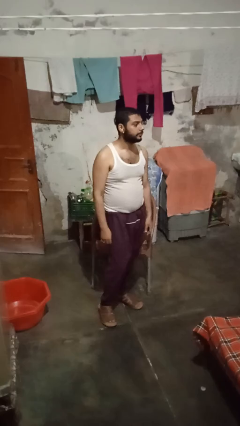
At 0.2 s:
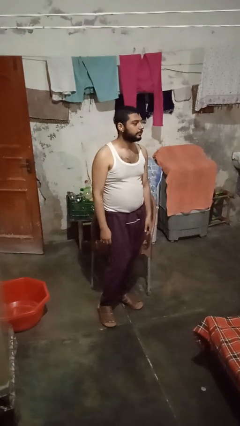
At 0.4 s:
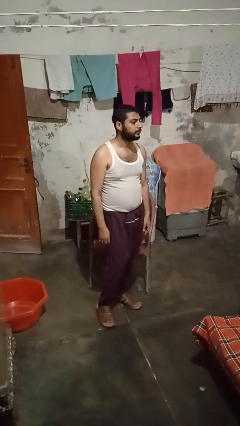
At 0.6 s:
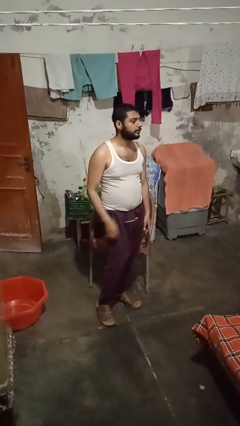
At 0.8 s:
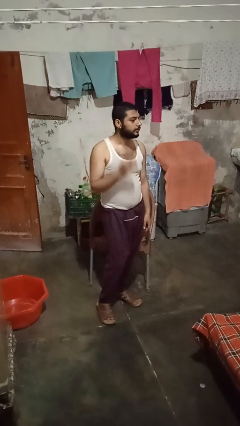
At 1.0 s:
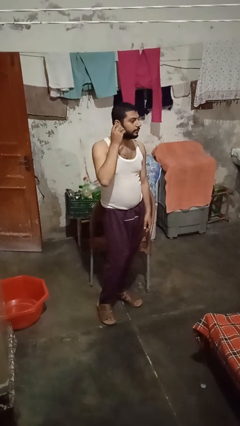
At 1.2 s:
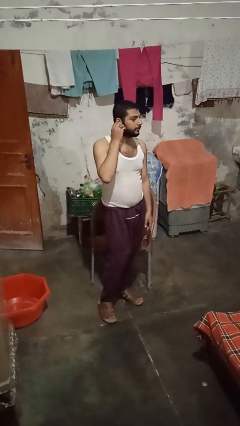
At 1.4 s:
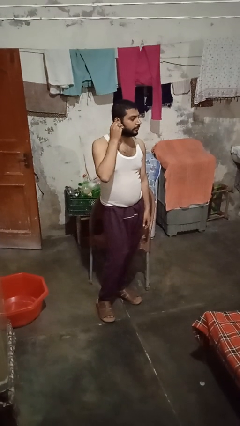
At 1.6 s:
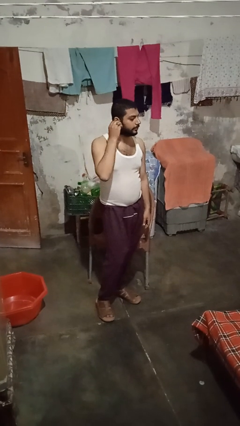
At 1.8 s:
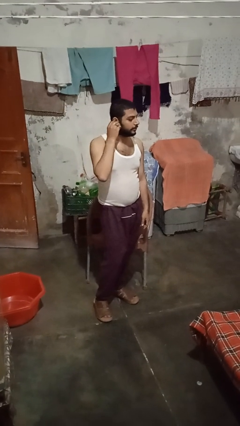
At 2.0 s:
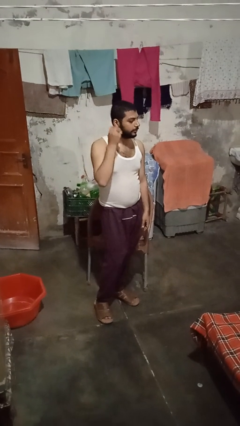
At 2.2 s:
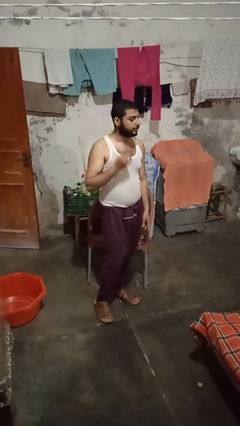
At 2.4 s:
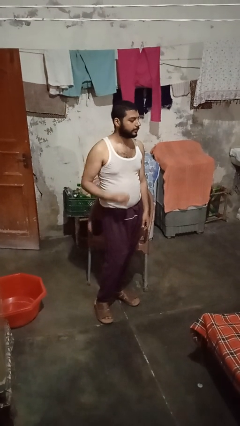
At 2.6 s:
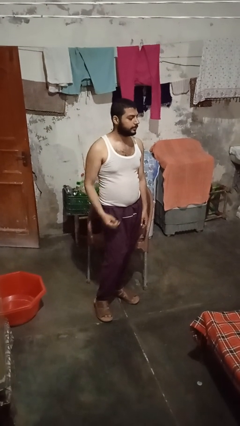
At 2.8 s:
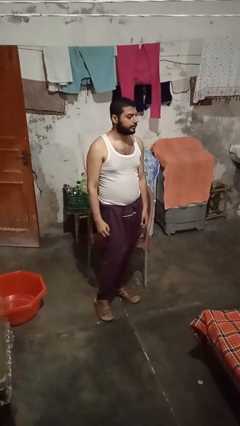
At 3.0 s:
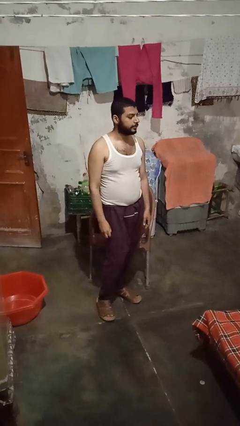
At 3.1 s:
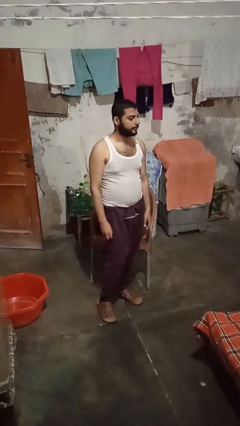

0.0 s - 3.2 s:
person takes off earrings

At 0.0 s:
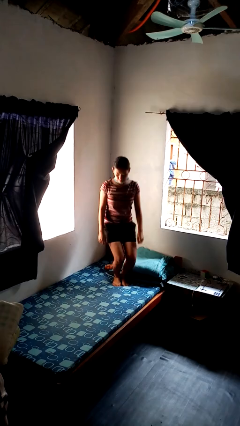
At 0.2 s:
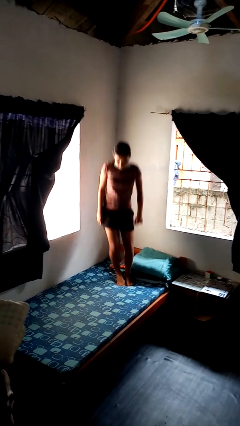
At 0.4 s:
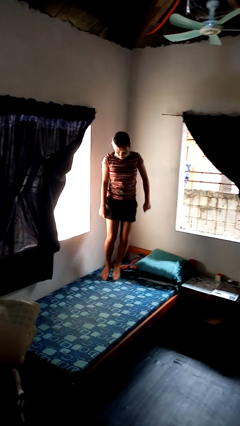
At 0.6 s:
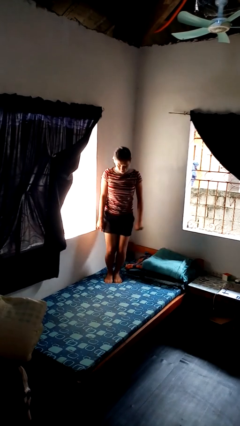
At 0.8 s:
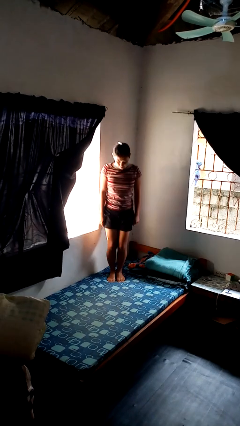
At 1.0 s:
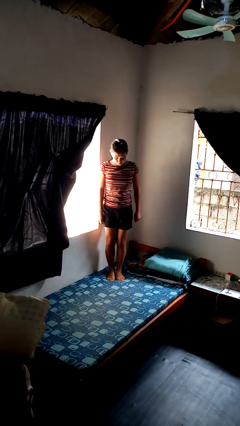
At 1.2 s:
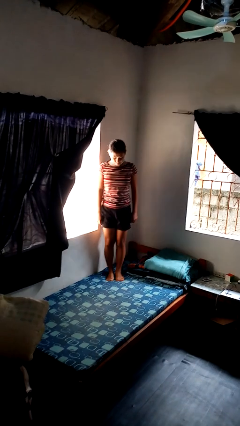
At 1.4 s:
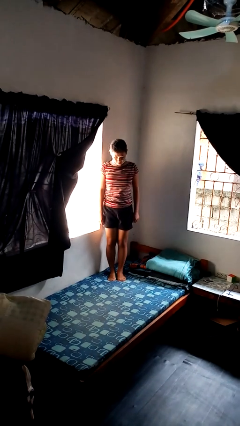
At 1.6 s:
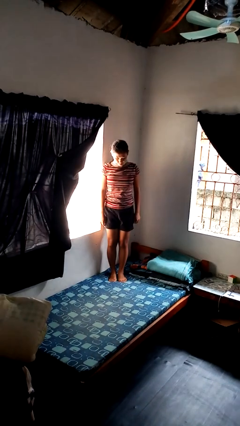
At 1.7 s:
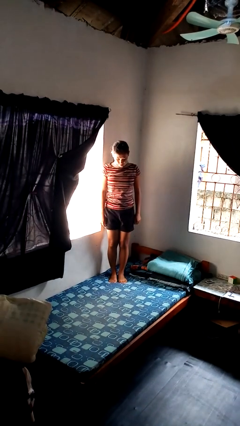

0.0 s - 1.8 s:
person jumps on bed

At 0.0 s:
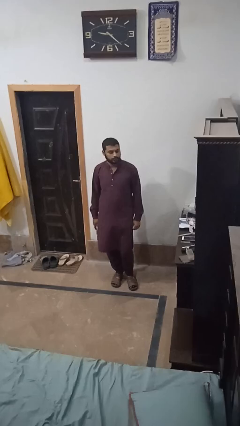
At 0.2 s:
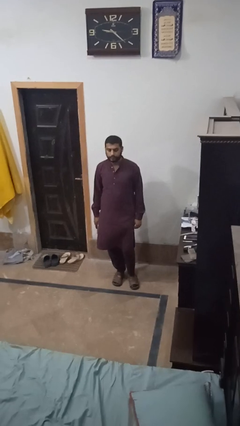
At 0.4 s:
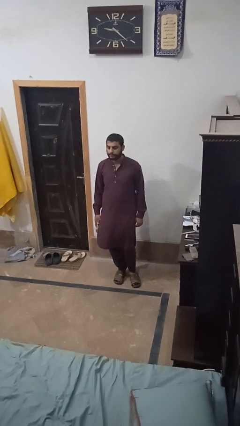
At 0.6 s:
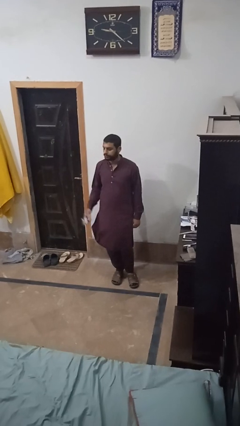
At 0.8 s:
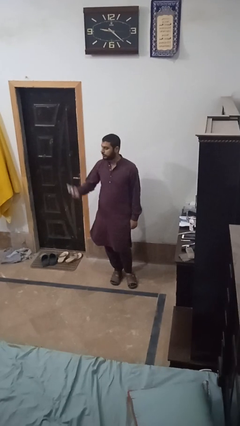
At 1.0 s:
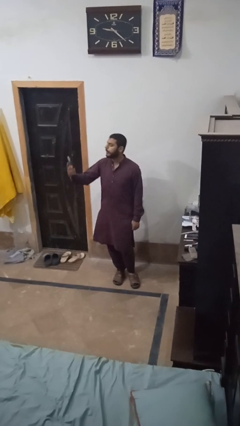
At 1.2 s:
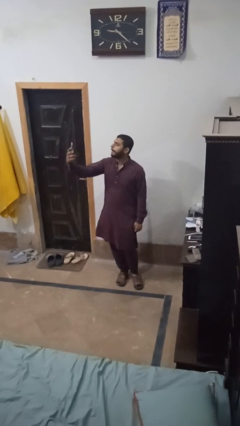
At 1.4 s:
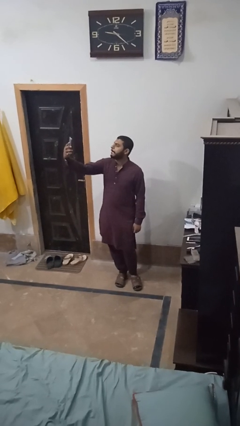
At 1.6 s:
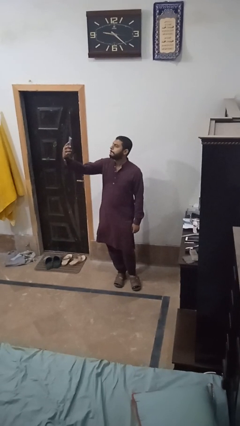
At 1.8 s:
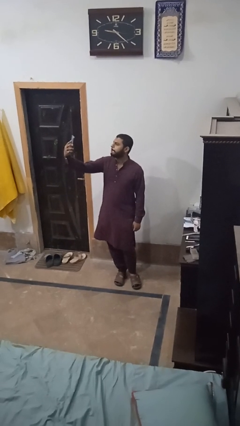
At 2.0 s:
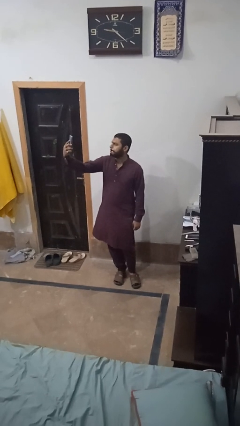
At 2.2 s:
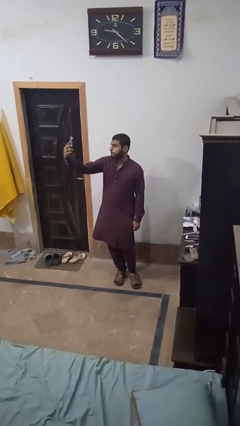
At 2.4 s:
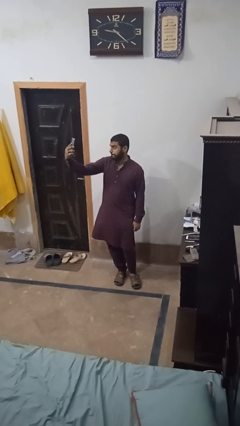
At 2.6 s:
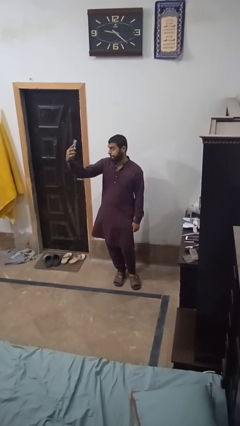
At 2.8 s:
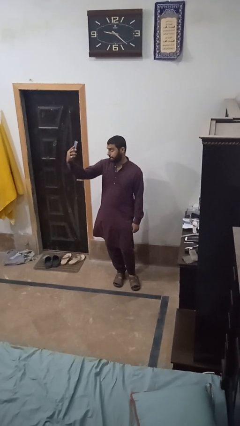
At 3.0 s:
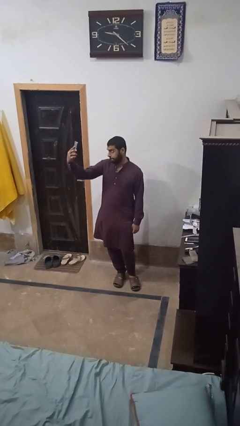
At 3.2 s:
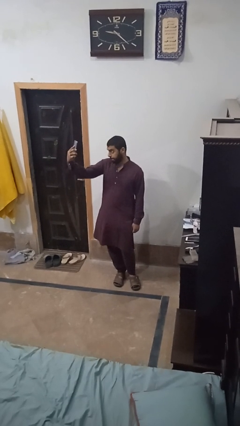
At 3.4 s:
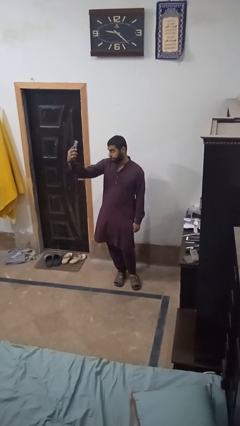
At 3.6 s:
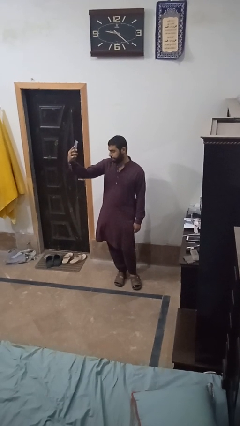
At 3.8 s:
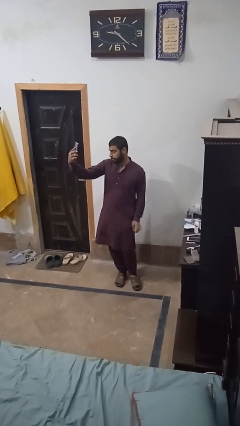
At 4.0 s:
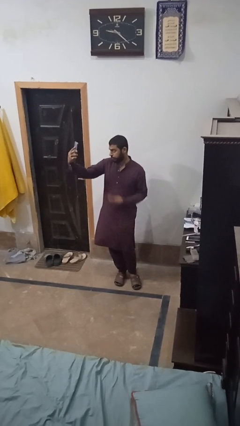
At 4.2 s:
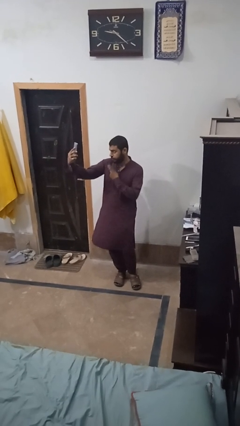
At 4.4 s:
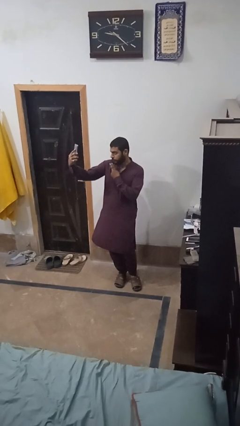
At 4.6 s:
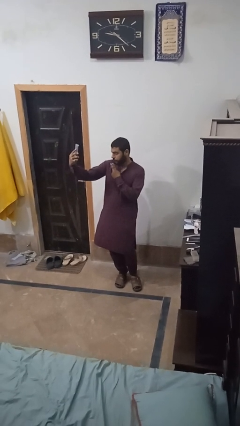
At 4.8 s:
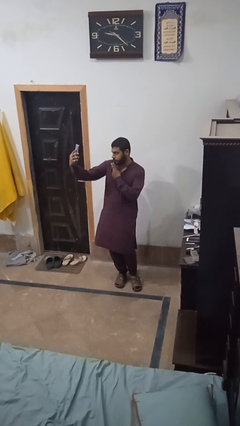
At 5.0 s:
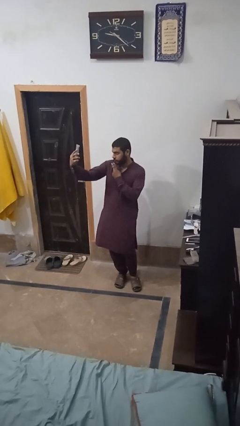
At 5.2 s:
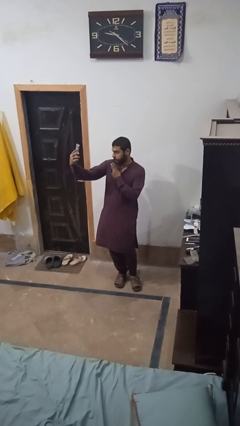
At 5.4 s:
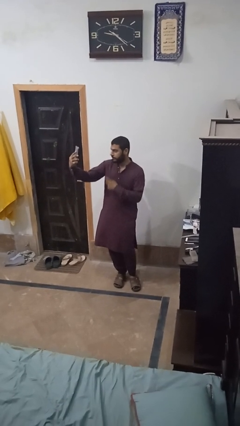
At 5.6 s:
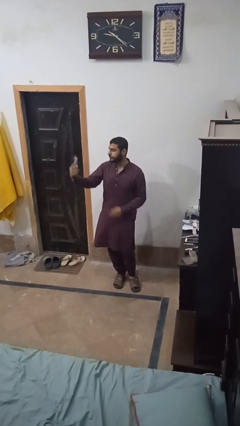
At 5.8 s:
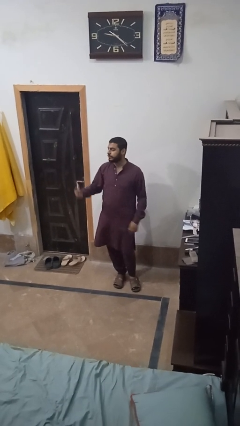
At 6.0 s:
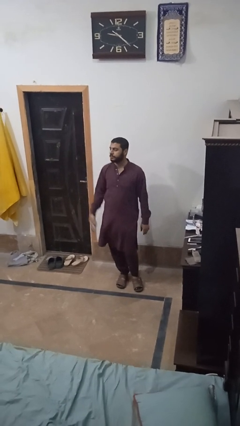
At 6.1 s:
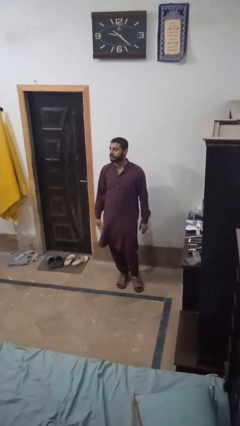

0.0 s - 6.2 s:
person takes selfie

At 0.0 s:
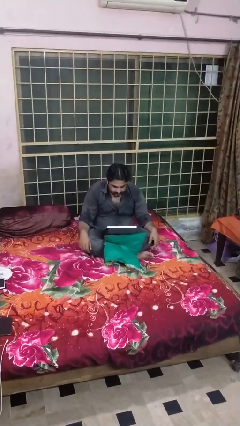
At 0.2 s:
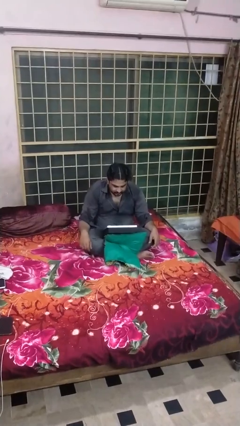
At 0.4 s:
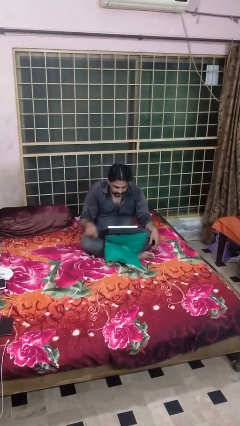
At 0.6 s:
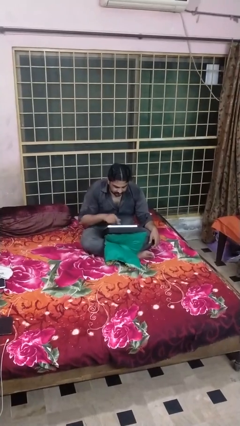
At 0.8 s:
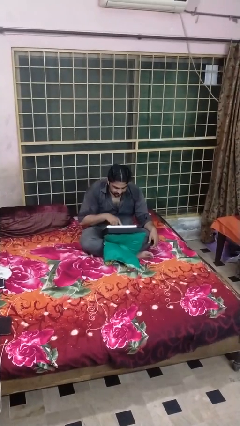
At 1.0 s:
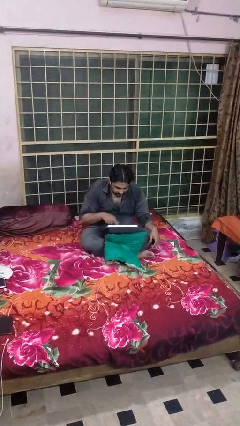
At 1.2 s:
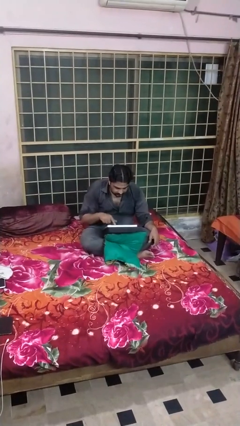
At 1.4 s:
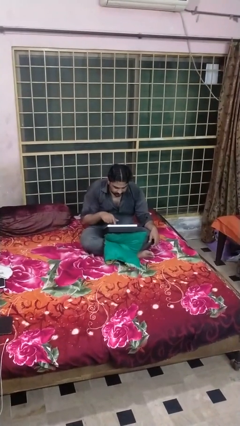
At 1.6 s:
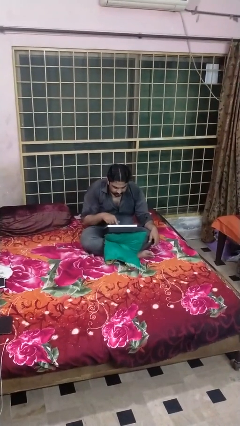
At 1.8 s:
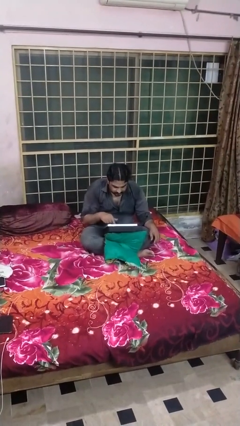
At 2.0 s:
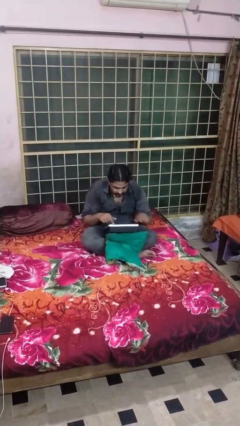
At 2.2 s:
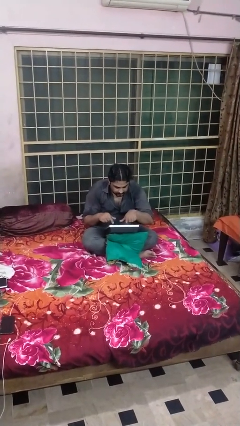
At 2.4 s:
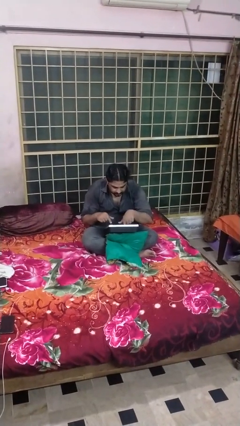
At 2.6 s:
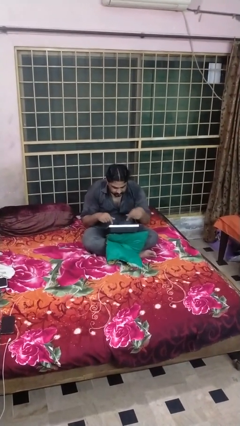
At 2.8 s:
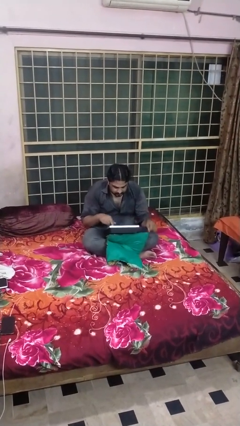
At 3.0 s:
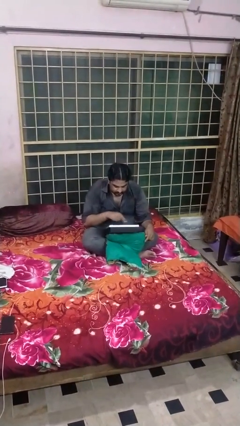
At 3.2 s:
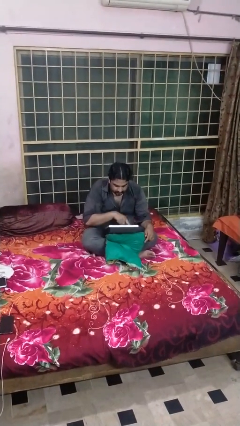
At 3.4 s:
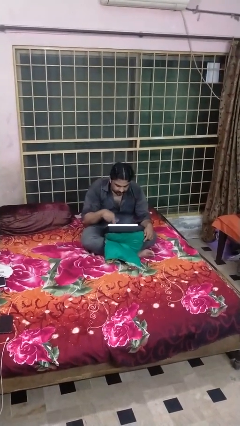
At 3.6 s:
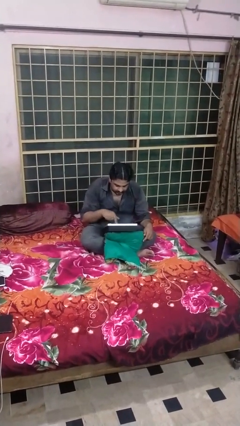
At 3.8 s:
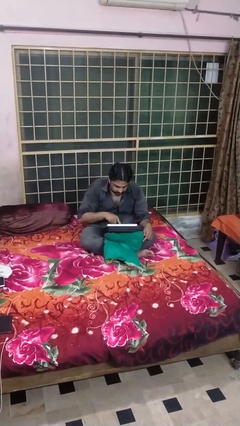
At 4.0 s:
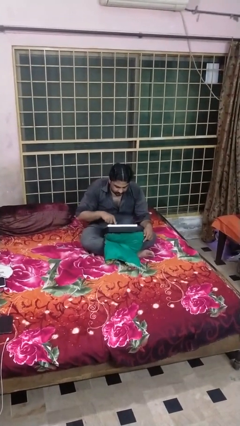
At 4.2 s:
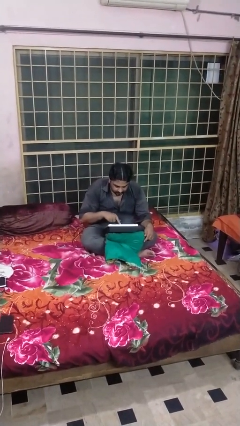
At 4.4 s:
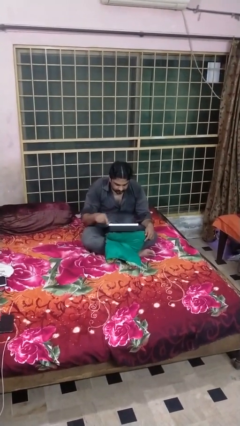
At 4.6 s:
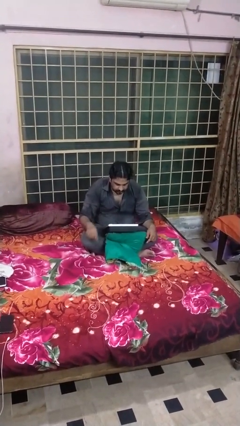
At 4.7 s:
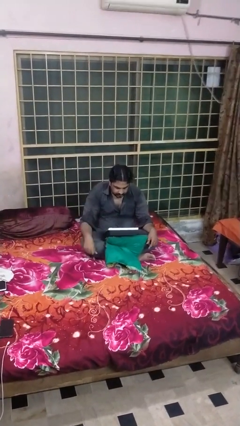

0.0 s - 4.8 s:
person interacts with tablet

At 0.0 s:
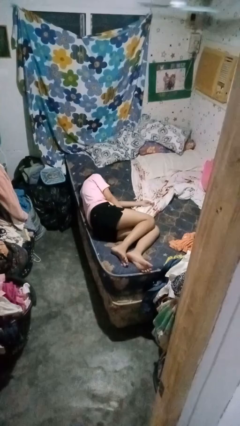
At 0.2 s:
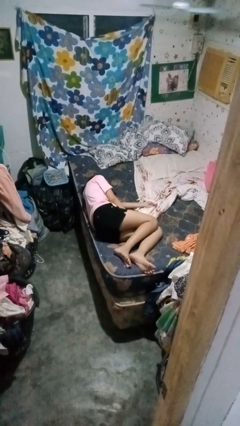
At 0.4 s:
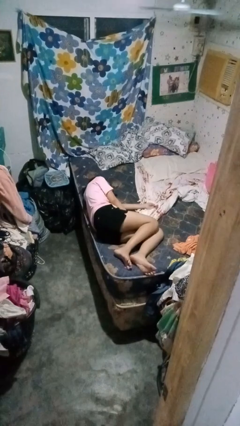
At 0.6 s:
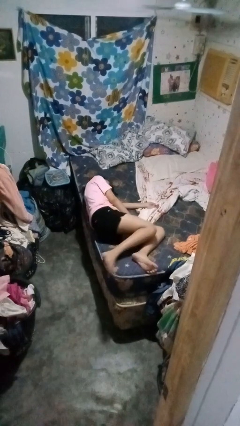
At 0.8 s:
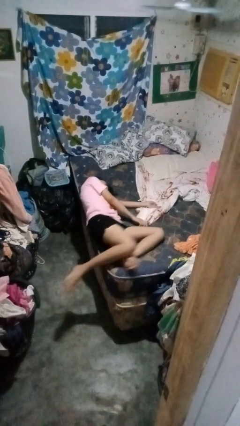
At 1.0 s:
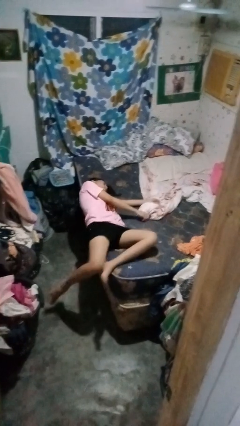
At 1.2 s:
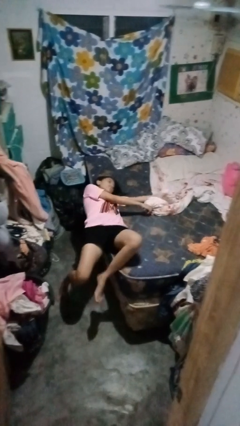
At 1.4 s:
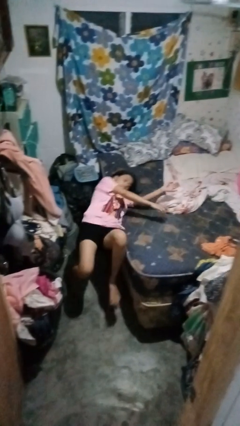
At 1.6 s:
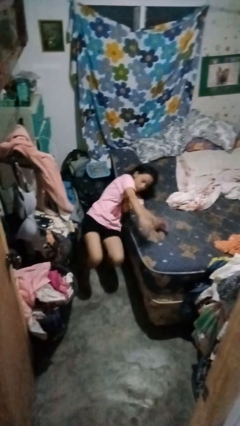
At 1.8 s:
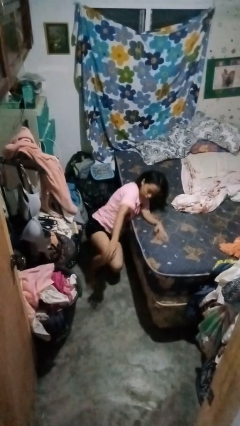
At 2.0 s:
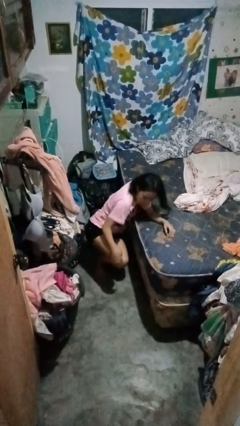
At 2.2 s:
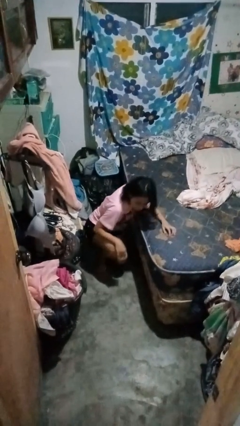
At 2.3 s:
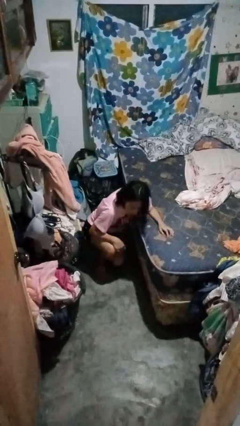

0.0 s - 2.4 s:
person falls from bed
